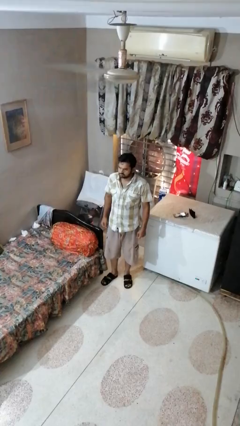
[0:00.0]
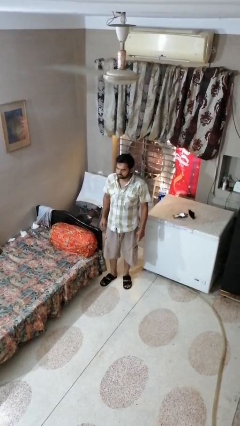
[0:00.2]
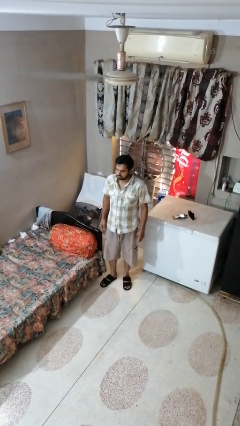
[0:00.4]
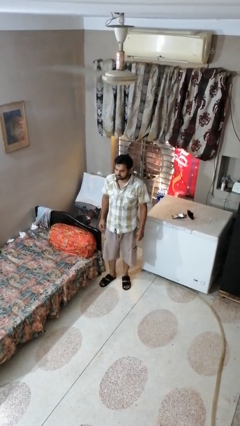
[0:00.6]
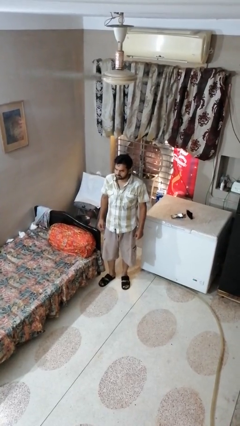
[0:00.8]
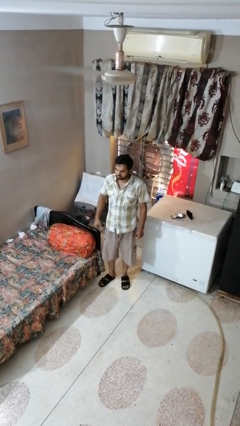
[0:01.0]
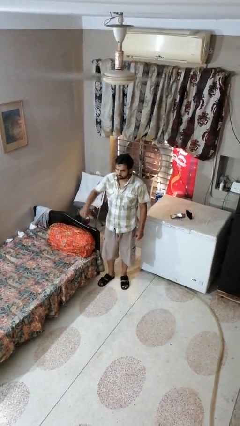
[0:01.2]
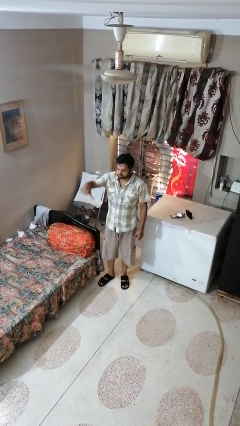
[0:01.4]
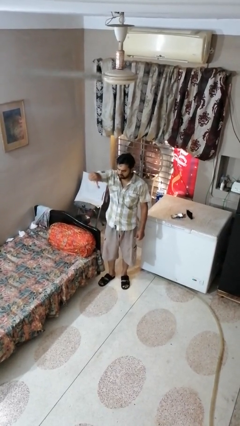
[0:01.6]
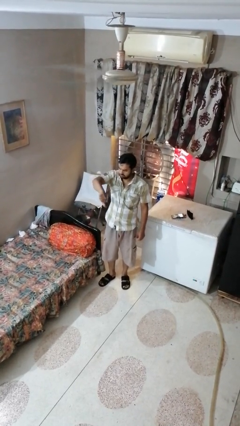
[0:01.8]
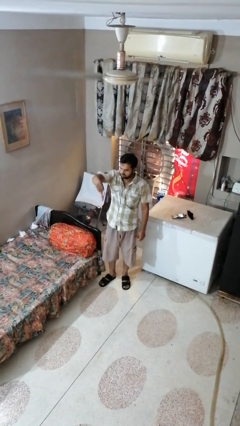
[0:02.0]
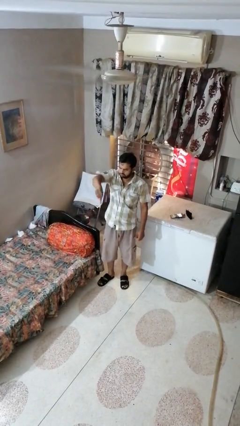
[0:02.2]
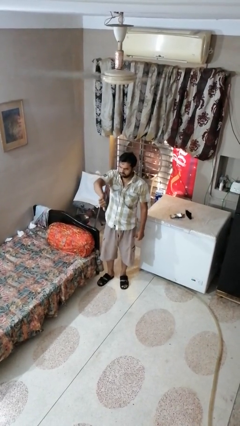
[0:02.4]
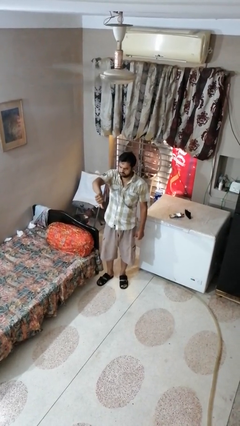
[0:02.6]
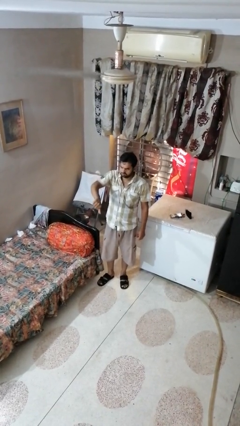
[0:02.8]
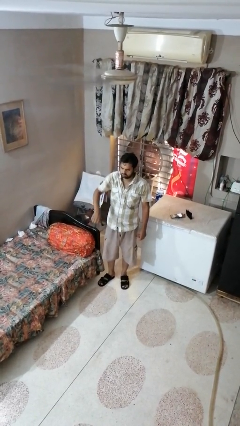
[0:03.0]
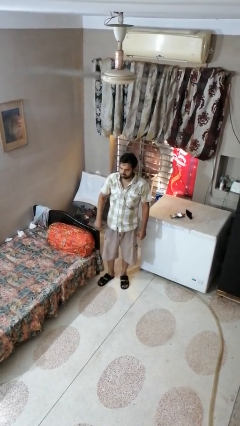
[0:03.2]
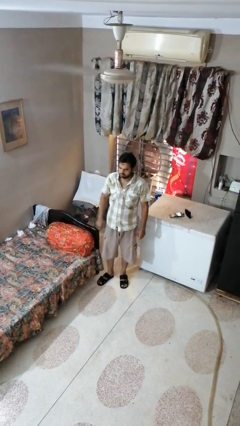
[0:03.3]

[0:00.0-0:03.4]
person gestures thumbs down

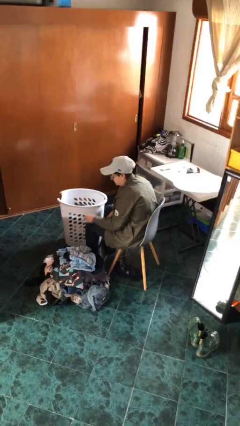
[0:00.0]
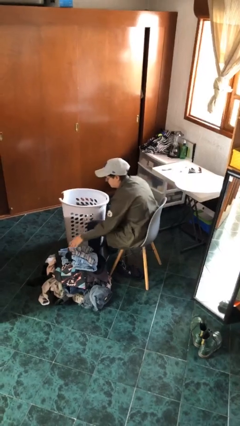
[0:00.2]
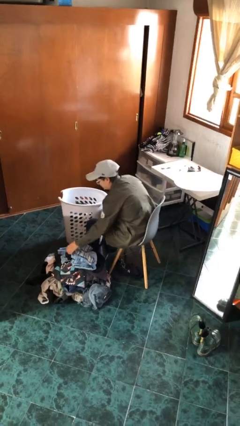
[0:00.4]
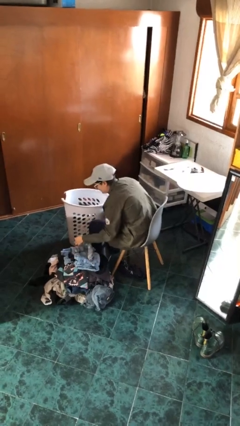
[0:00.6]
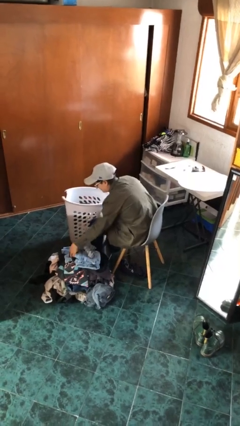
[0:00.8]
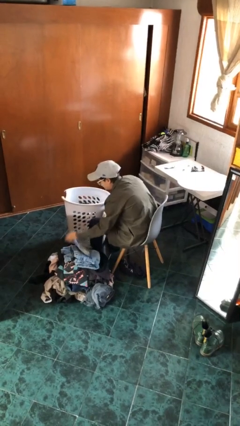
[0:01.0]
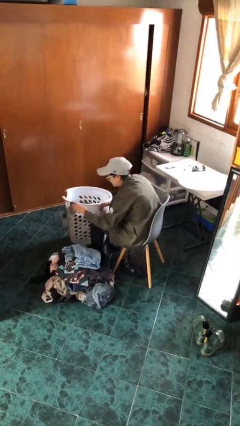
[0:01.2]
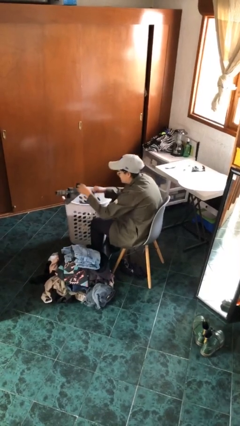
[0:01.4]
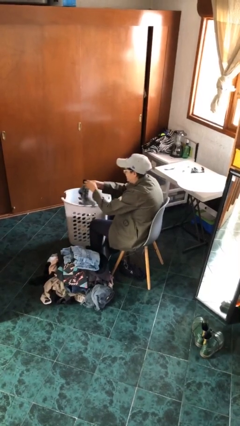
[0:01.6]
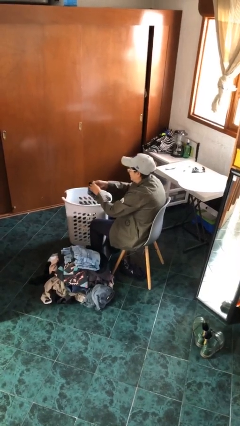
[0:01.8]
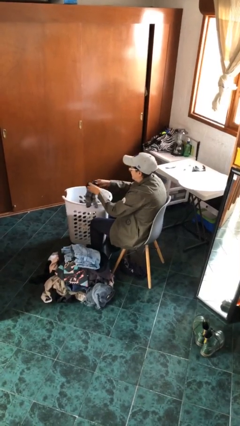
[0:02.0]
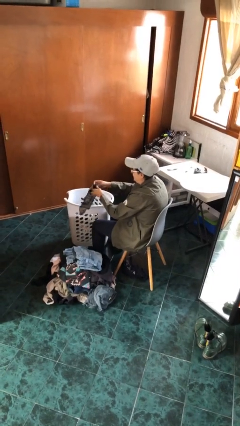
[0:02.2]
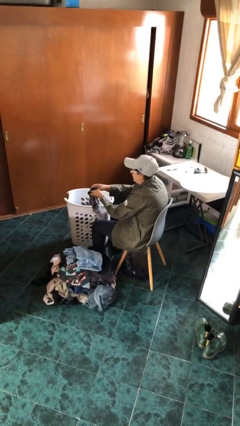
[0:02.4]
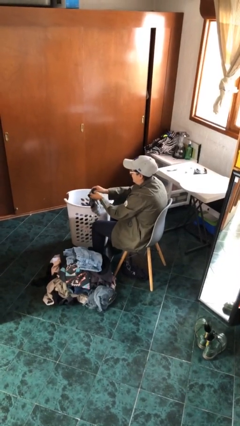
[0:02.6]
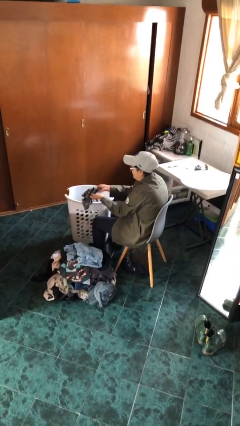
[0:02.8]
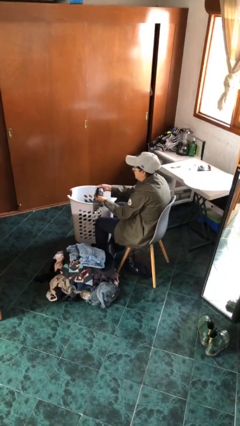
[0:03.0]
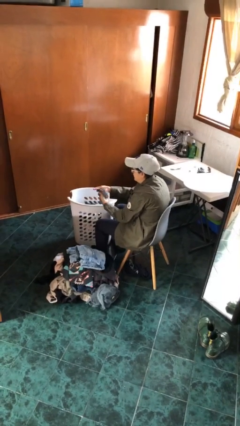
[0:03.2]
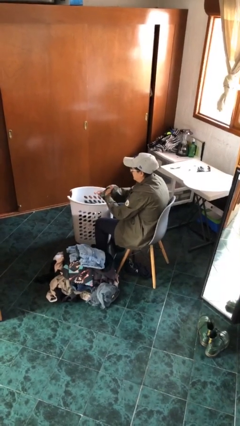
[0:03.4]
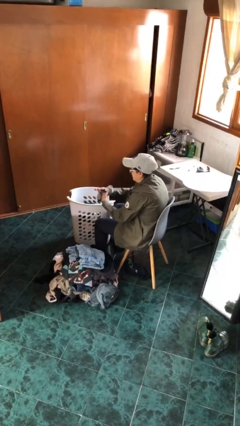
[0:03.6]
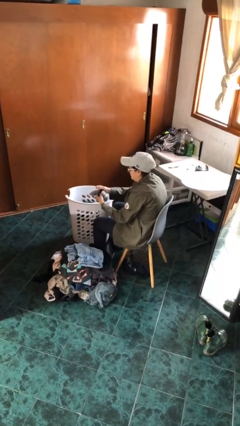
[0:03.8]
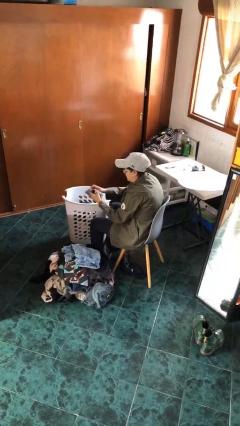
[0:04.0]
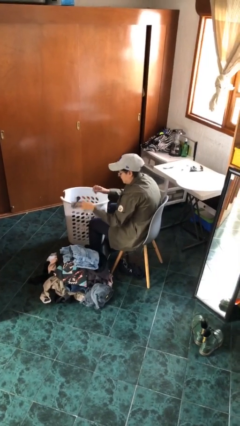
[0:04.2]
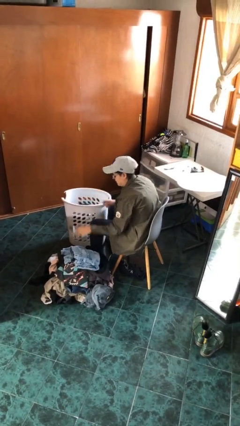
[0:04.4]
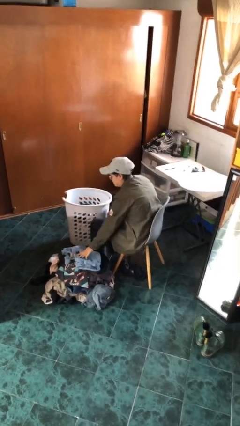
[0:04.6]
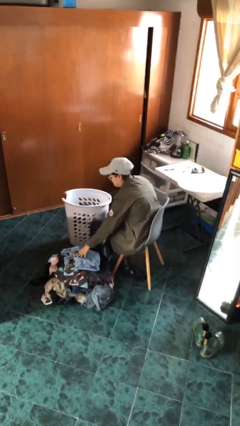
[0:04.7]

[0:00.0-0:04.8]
person folds socks

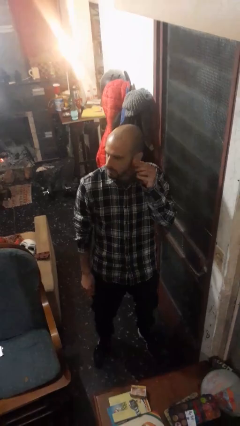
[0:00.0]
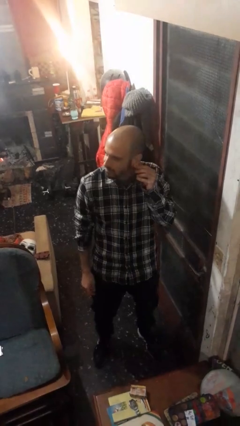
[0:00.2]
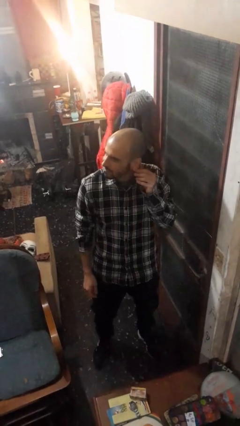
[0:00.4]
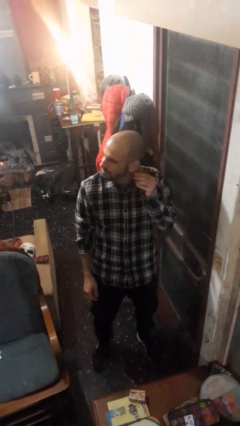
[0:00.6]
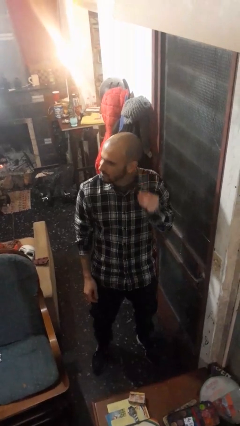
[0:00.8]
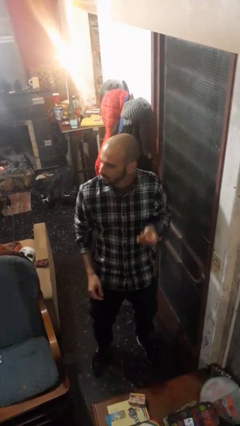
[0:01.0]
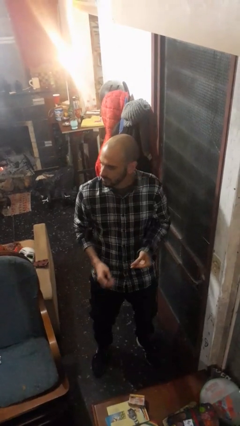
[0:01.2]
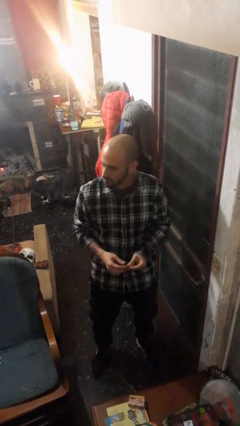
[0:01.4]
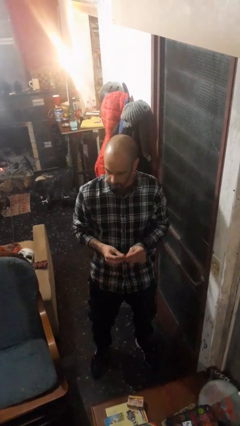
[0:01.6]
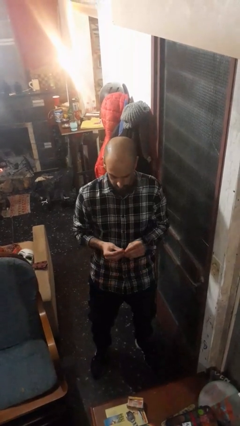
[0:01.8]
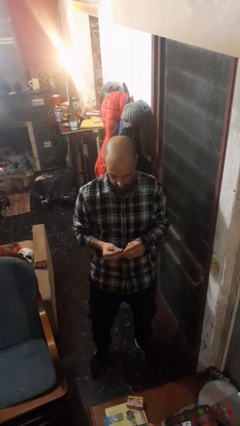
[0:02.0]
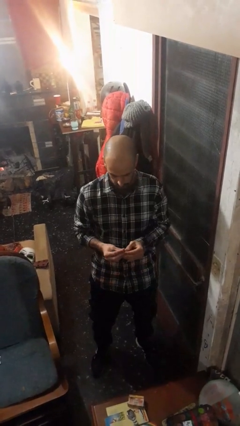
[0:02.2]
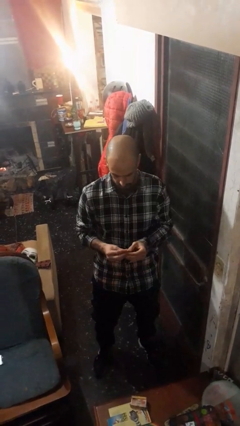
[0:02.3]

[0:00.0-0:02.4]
person takes off earrings

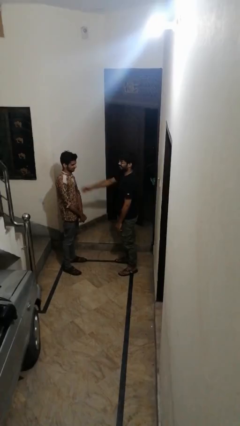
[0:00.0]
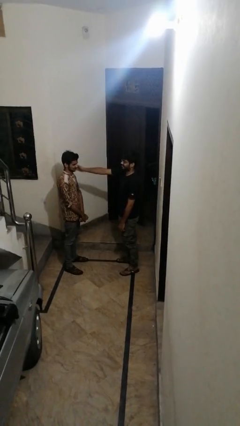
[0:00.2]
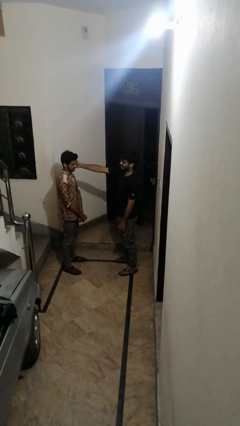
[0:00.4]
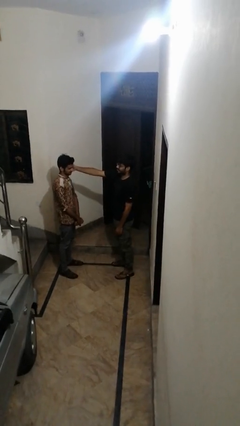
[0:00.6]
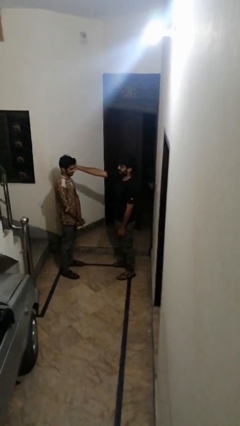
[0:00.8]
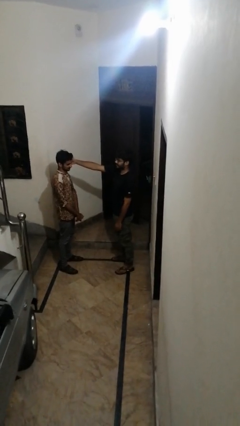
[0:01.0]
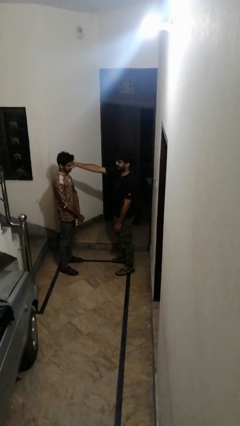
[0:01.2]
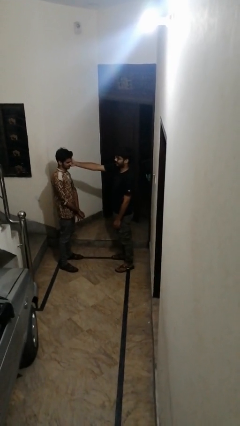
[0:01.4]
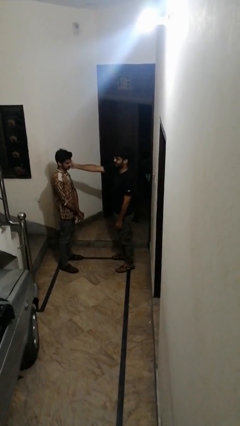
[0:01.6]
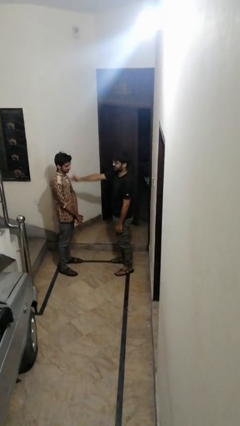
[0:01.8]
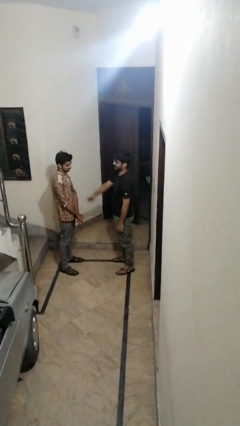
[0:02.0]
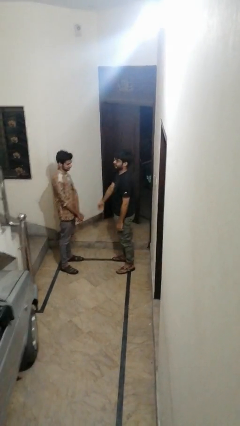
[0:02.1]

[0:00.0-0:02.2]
person touches face of person

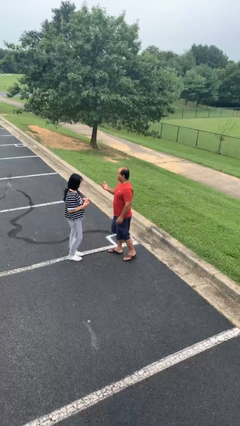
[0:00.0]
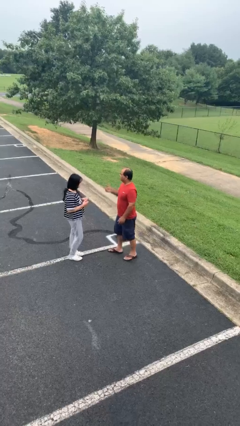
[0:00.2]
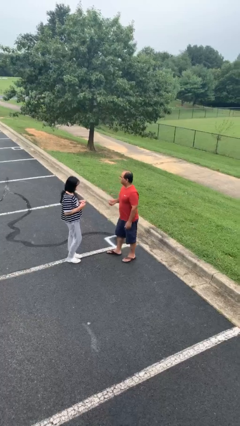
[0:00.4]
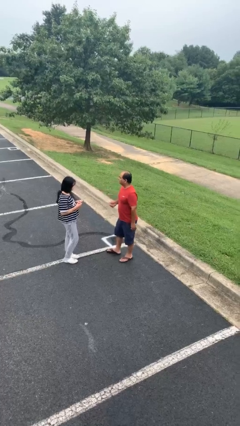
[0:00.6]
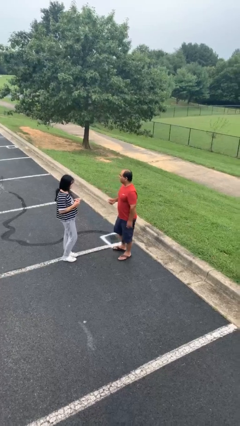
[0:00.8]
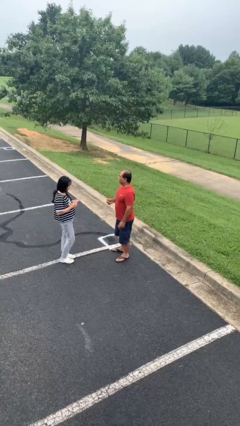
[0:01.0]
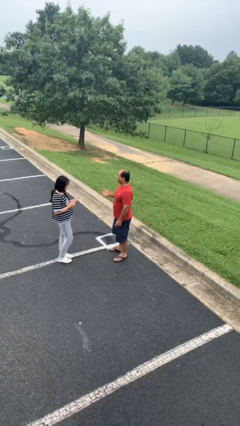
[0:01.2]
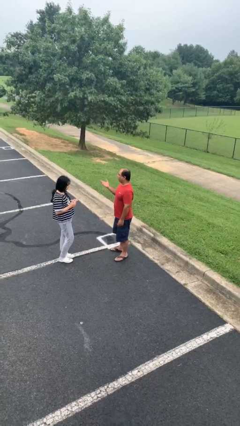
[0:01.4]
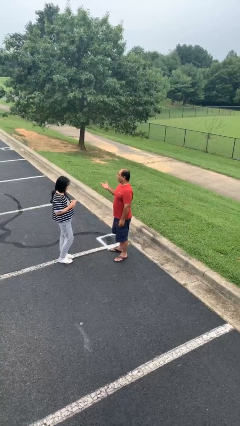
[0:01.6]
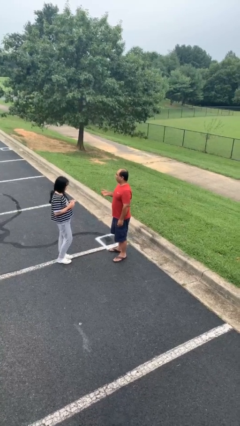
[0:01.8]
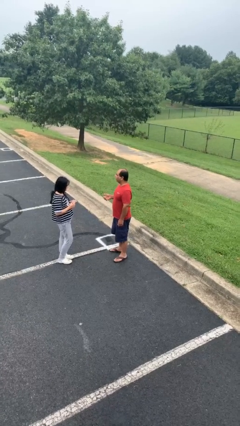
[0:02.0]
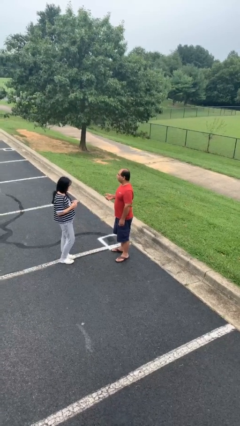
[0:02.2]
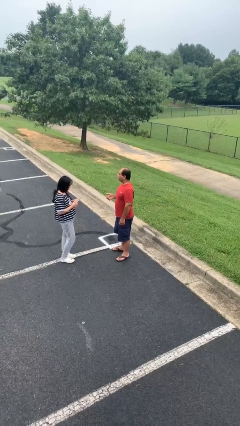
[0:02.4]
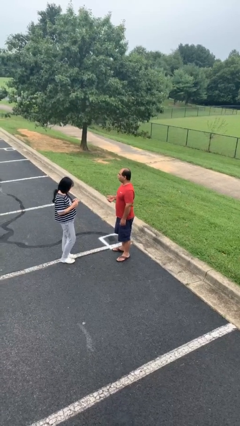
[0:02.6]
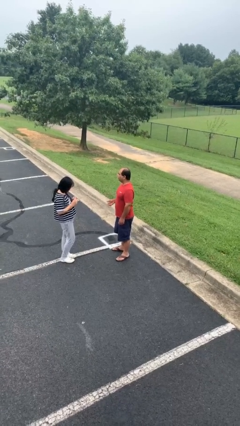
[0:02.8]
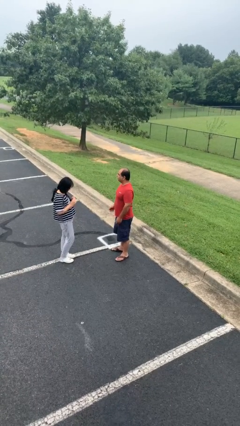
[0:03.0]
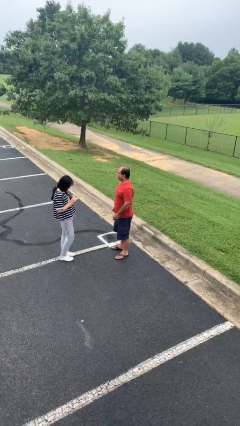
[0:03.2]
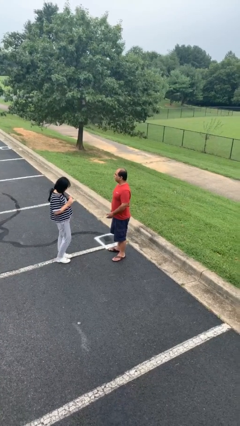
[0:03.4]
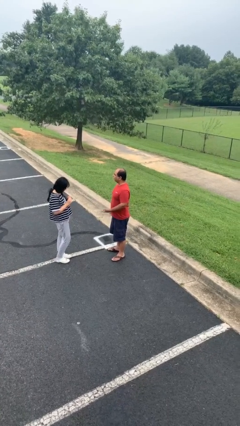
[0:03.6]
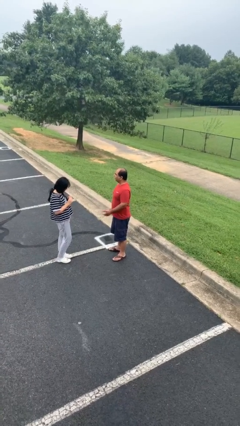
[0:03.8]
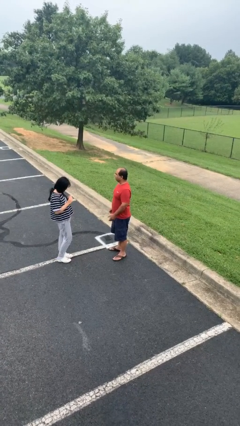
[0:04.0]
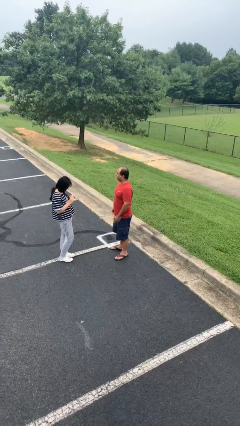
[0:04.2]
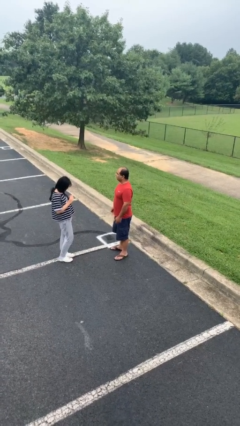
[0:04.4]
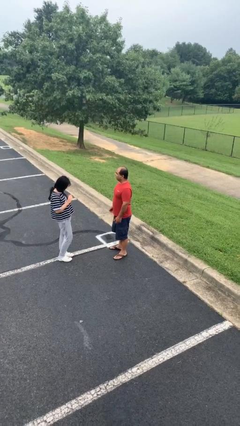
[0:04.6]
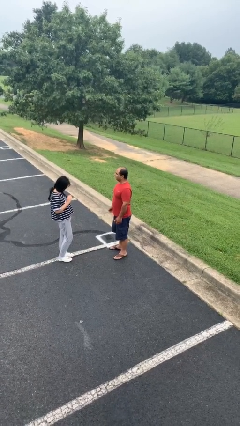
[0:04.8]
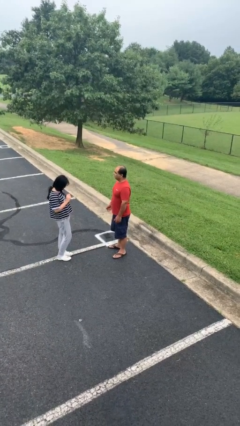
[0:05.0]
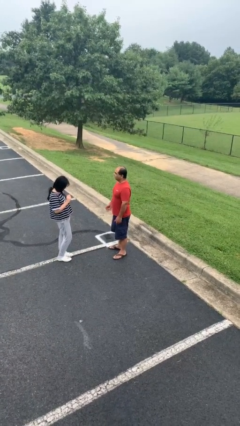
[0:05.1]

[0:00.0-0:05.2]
person talks to person
